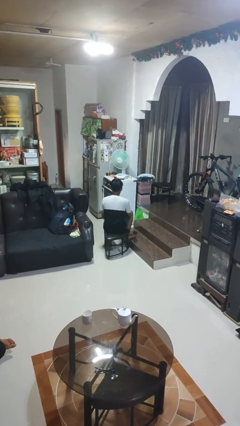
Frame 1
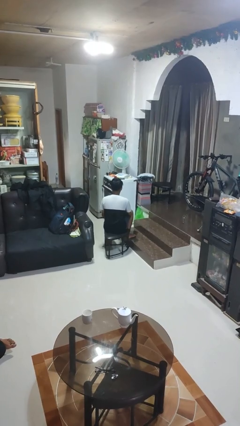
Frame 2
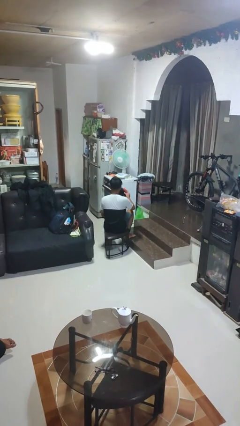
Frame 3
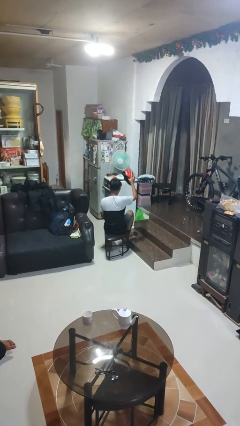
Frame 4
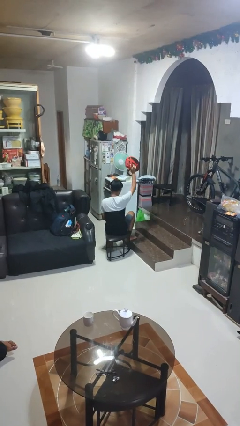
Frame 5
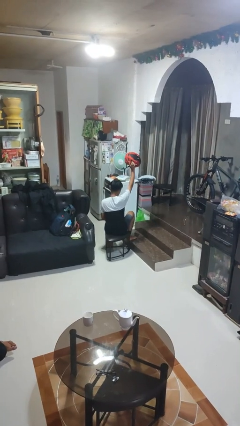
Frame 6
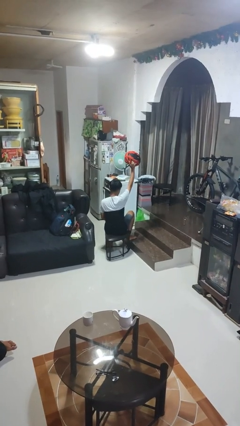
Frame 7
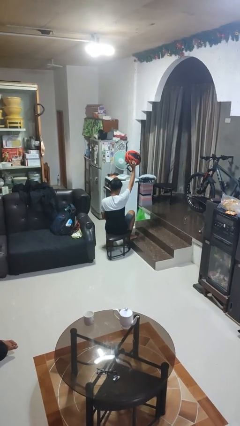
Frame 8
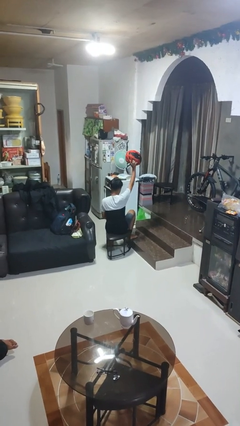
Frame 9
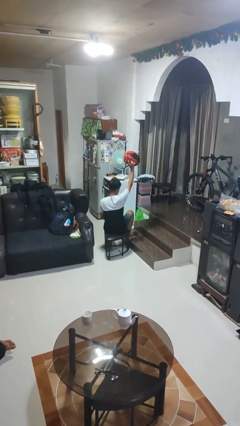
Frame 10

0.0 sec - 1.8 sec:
person holds object above head

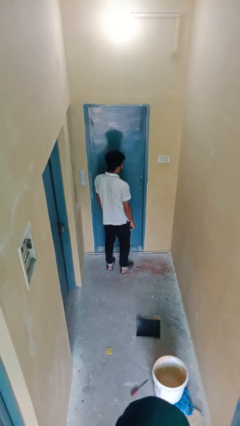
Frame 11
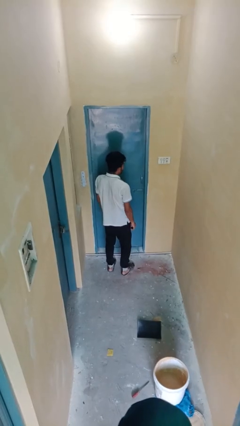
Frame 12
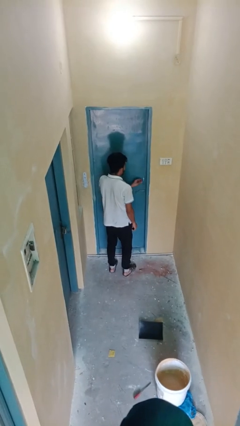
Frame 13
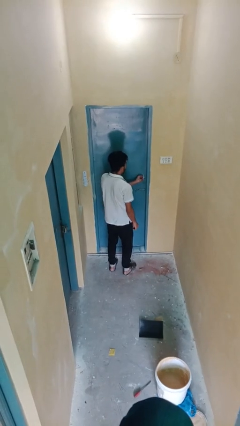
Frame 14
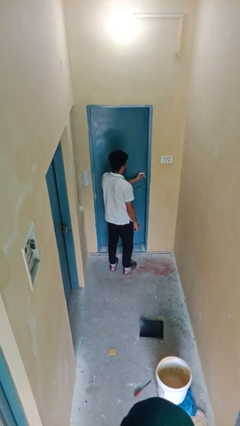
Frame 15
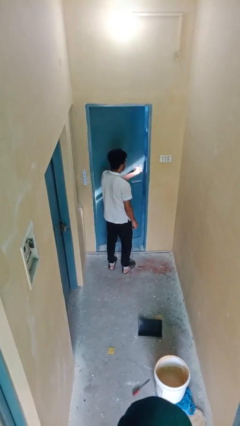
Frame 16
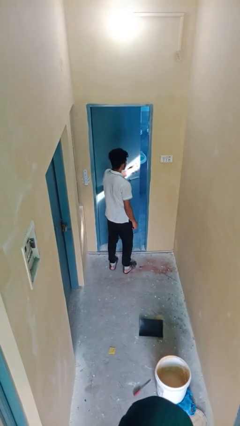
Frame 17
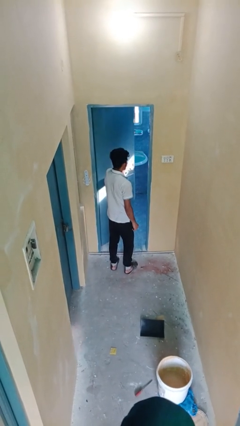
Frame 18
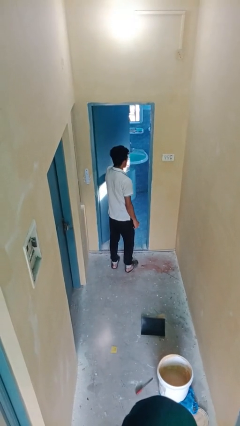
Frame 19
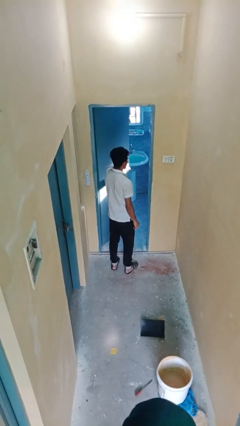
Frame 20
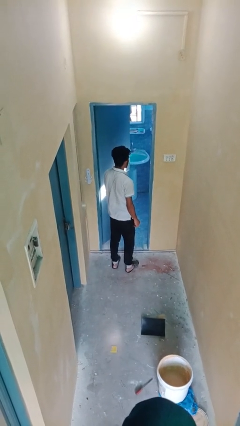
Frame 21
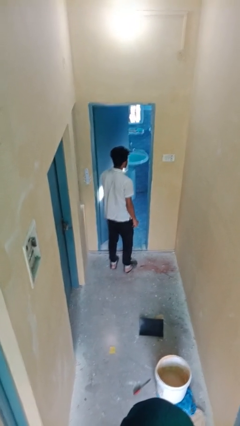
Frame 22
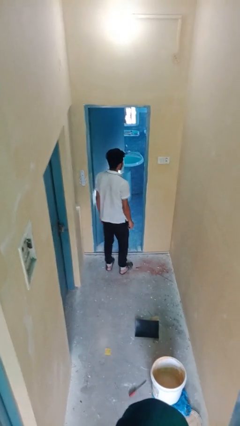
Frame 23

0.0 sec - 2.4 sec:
person opens facility door

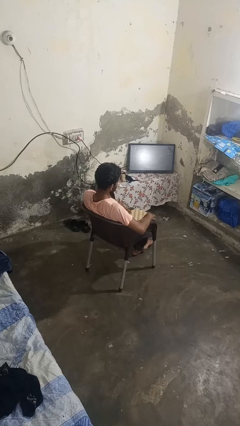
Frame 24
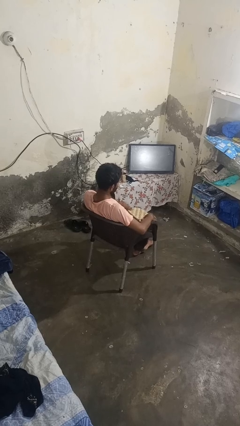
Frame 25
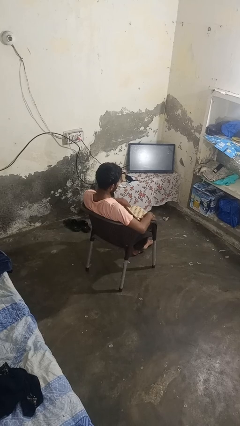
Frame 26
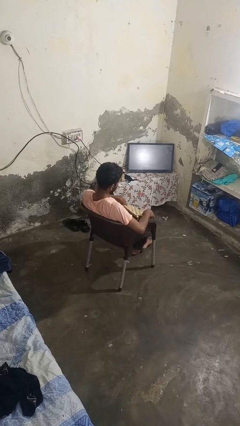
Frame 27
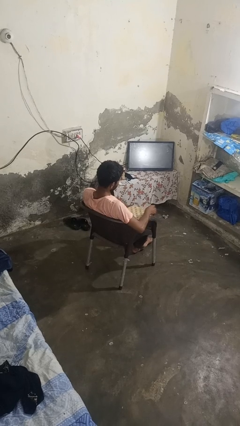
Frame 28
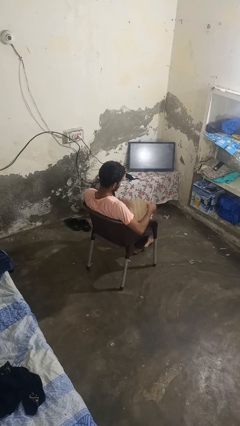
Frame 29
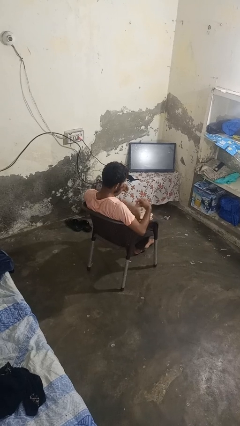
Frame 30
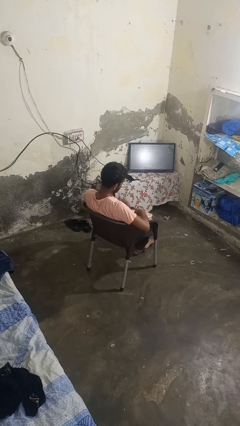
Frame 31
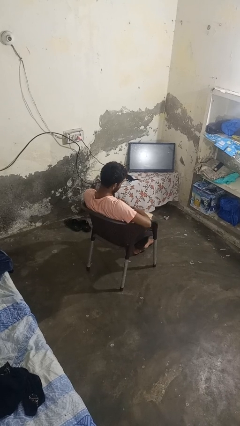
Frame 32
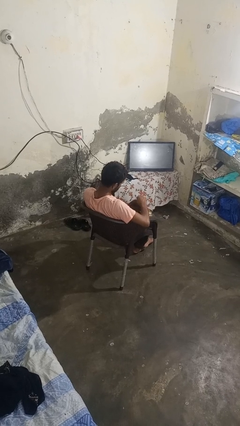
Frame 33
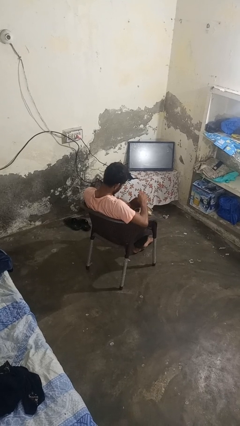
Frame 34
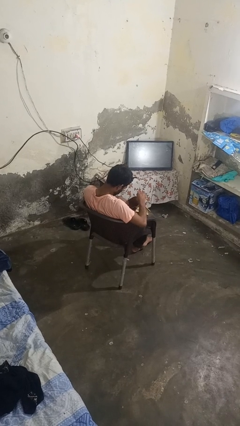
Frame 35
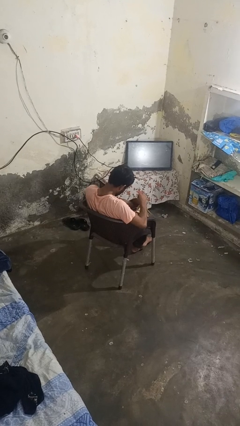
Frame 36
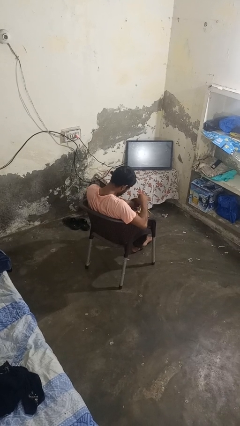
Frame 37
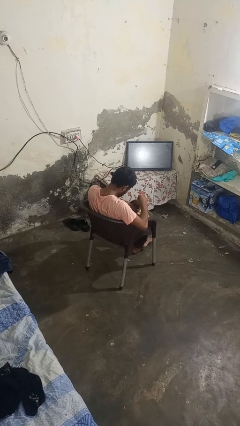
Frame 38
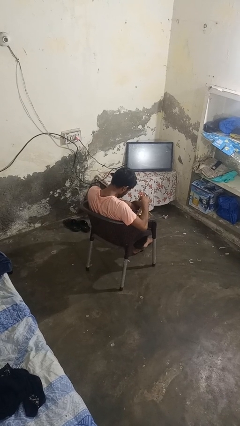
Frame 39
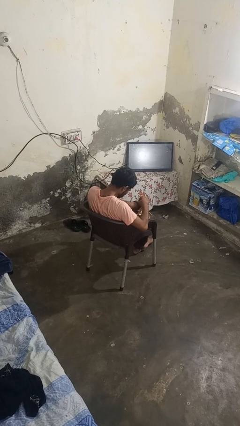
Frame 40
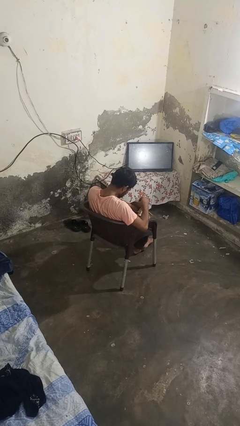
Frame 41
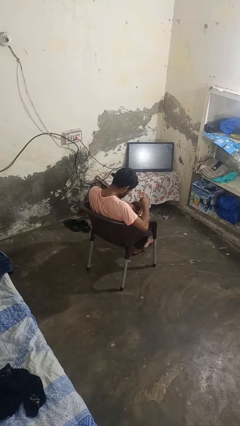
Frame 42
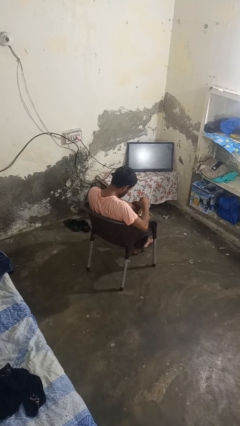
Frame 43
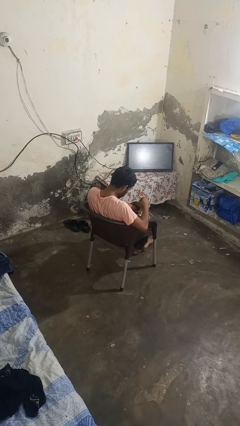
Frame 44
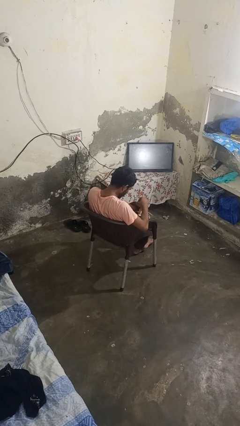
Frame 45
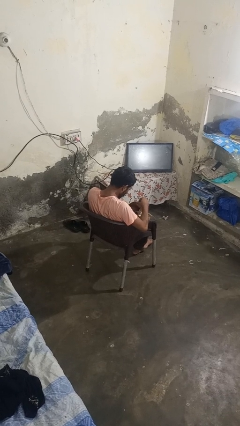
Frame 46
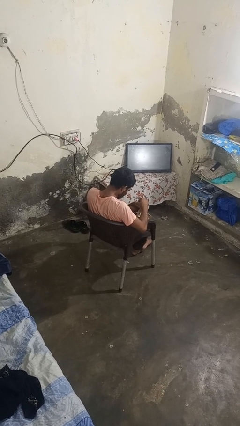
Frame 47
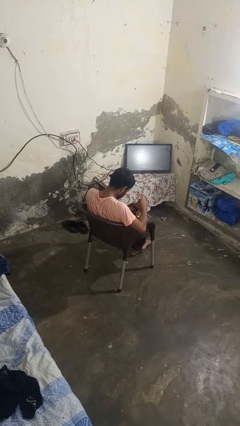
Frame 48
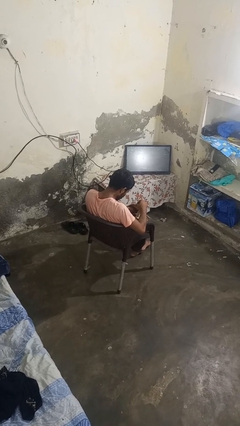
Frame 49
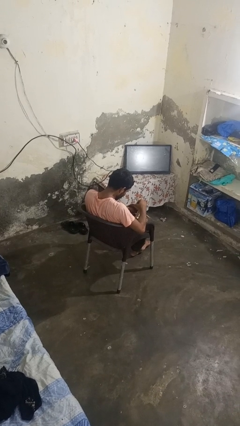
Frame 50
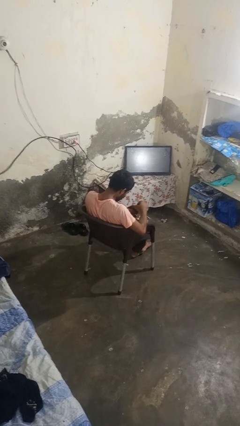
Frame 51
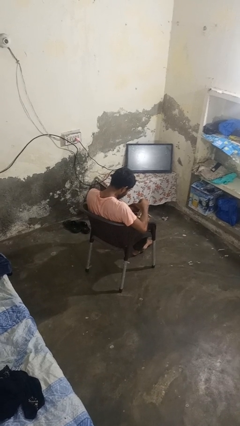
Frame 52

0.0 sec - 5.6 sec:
person searches in purse

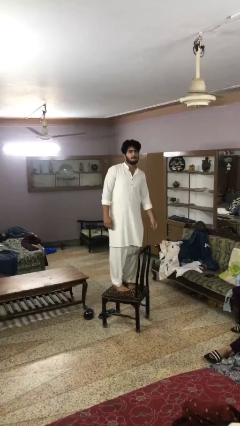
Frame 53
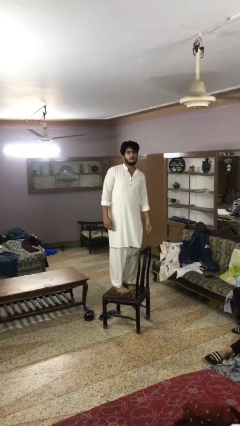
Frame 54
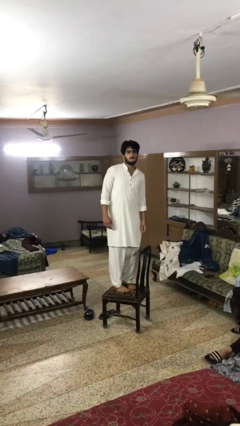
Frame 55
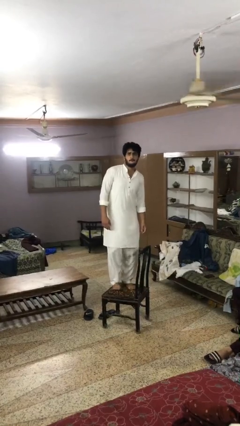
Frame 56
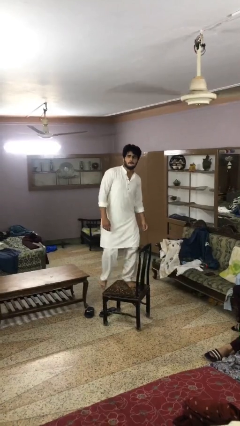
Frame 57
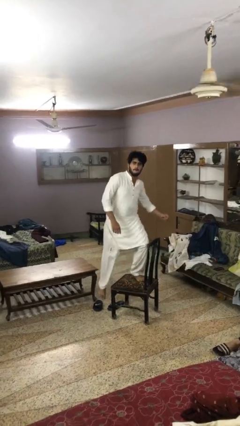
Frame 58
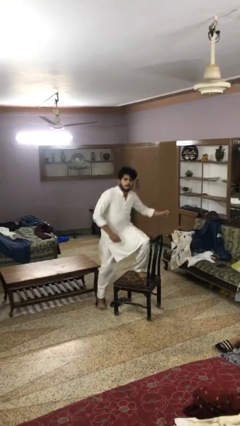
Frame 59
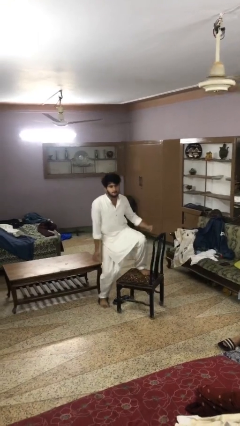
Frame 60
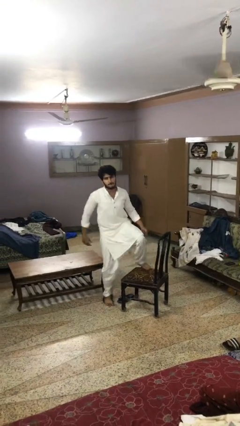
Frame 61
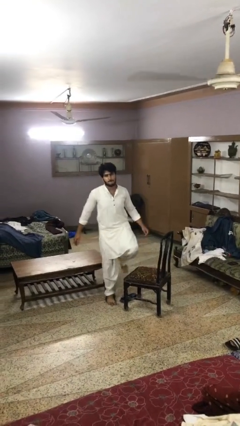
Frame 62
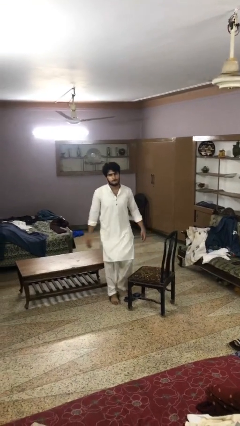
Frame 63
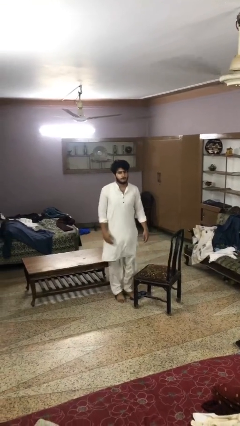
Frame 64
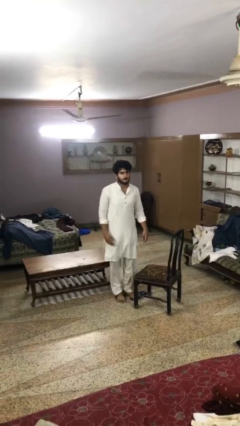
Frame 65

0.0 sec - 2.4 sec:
person climbs off chair

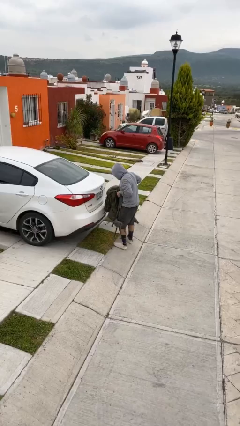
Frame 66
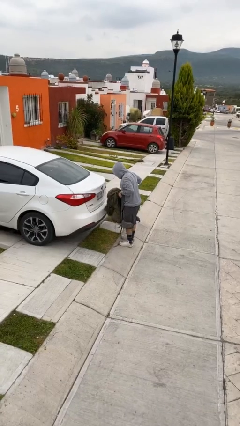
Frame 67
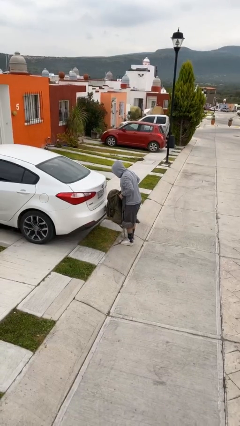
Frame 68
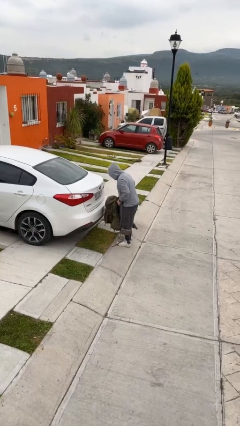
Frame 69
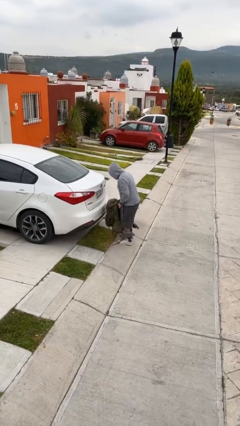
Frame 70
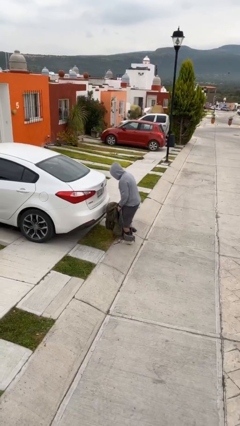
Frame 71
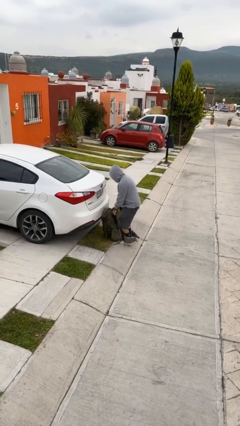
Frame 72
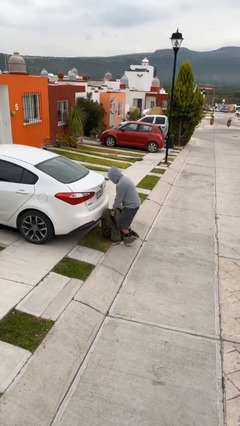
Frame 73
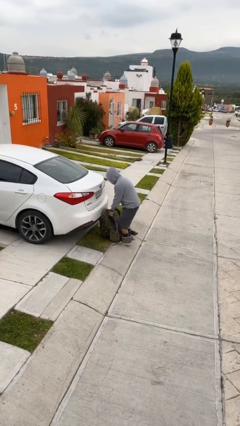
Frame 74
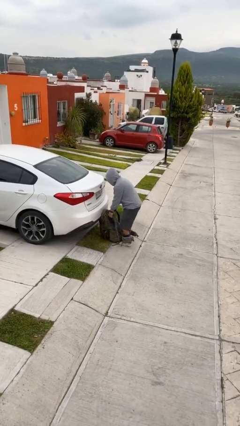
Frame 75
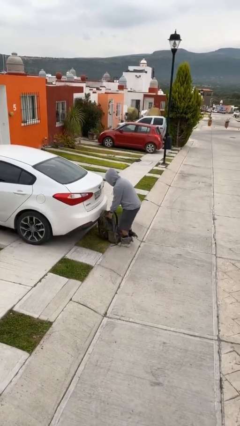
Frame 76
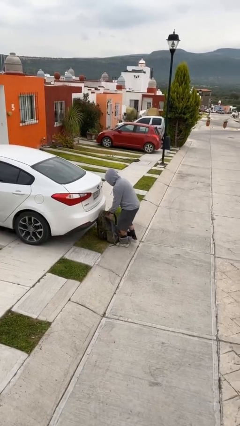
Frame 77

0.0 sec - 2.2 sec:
person puts down object on floor

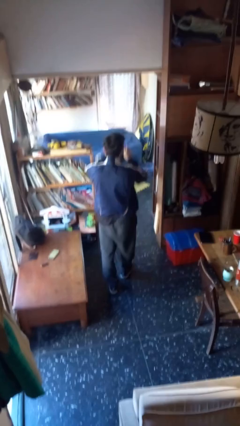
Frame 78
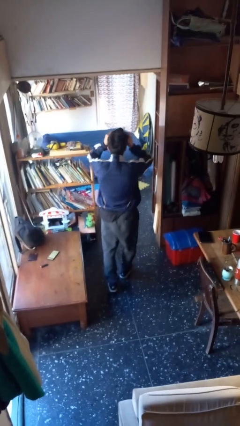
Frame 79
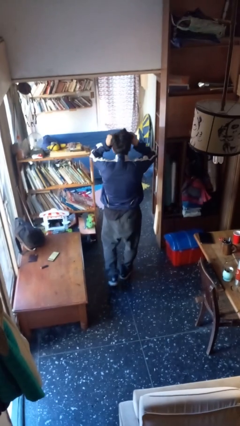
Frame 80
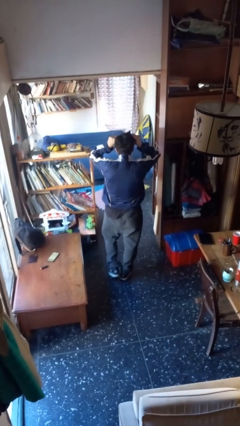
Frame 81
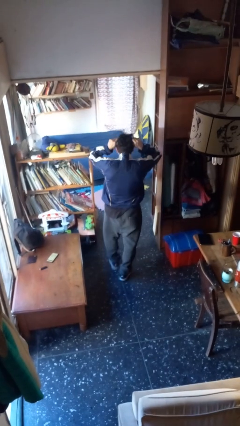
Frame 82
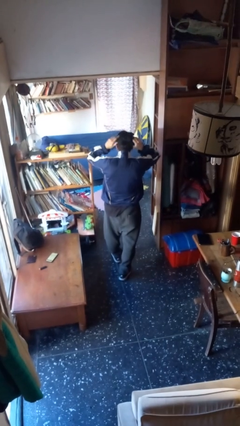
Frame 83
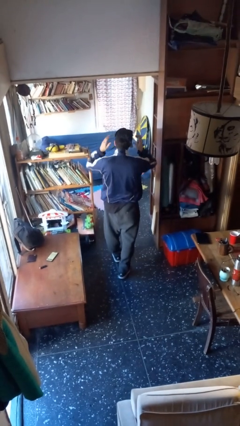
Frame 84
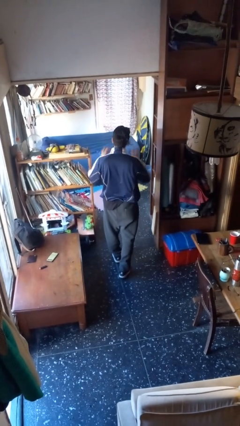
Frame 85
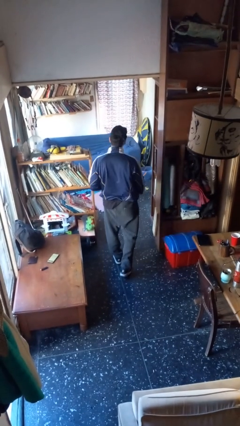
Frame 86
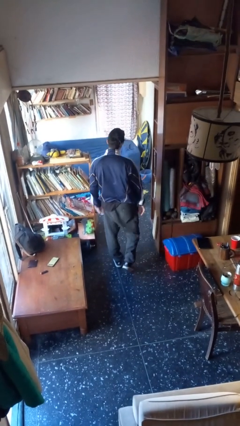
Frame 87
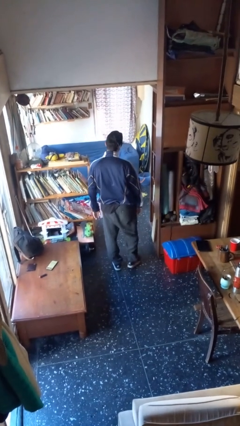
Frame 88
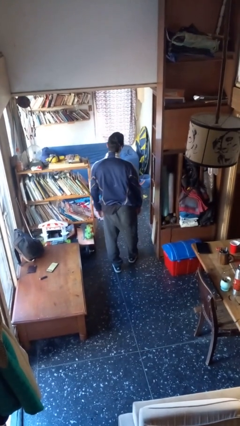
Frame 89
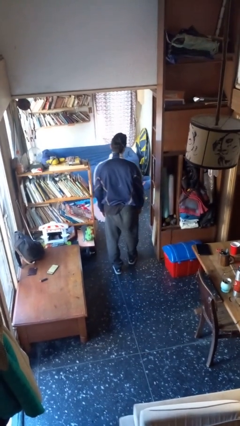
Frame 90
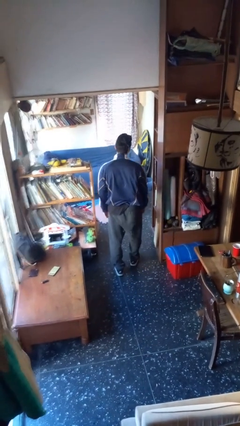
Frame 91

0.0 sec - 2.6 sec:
person puts on facemask

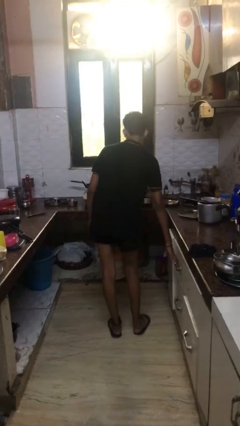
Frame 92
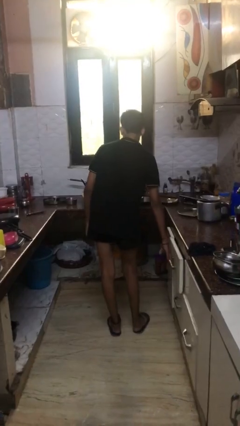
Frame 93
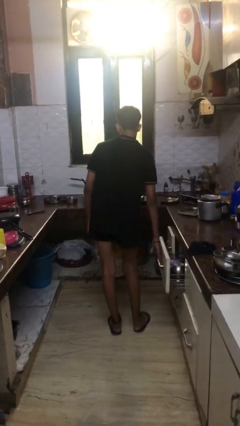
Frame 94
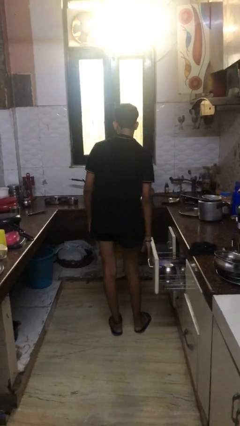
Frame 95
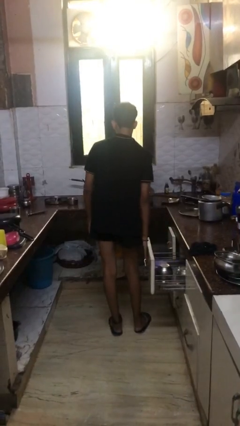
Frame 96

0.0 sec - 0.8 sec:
person opens kitchen drawer
